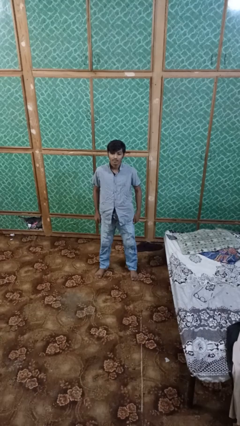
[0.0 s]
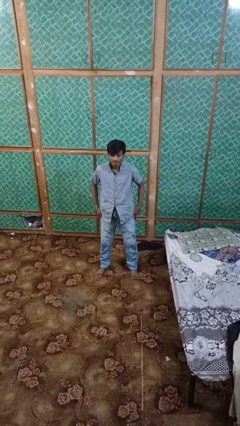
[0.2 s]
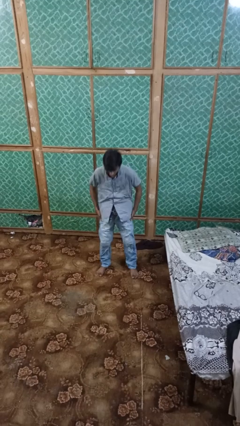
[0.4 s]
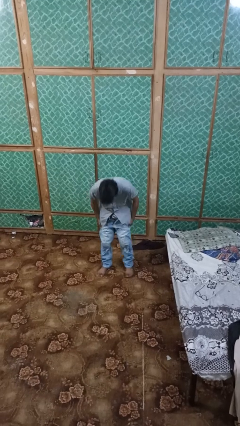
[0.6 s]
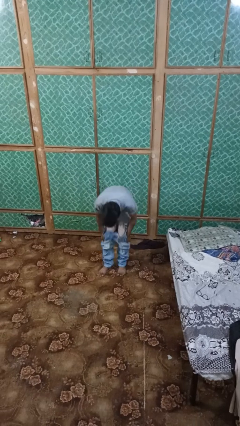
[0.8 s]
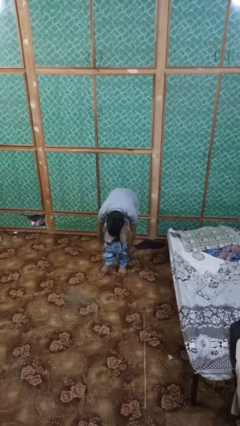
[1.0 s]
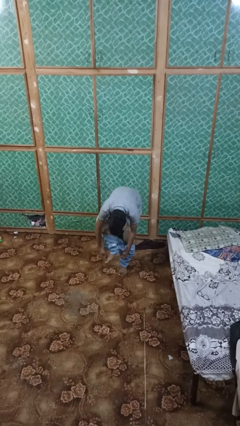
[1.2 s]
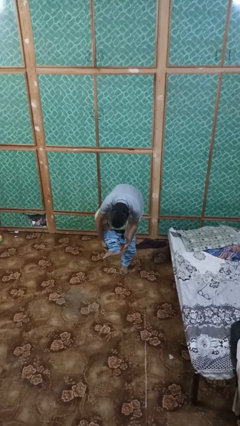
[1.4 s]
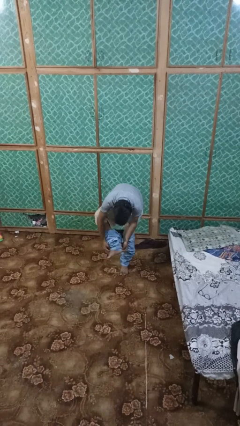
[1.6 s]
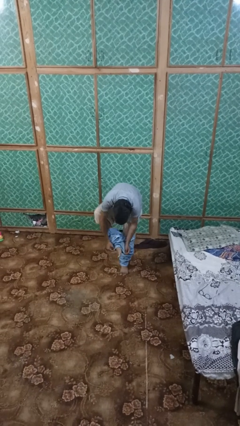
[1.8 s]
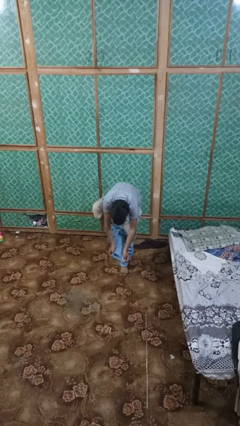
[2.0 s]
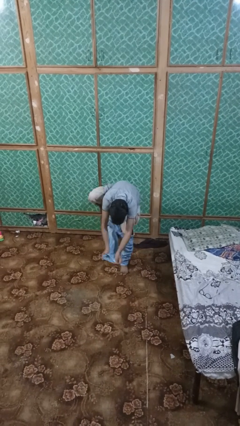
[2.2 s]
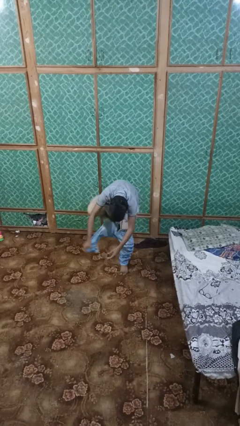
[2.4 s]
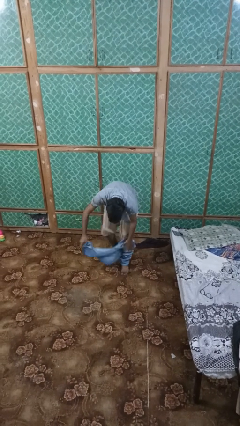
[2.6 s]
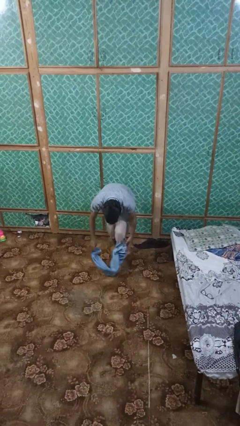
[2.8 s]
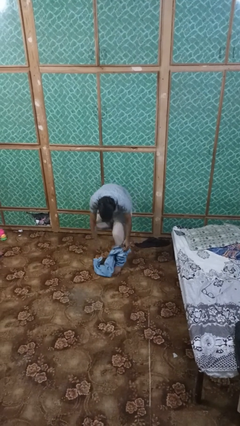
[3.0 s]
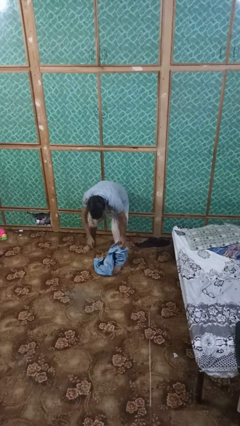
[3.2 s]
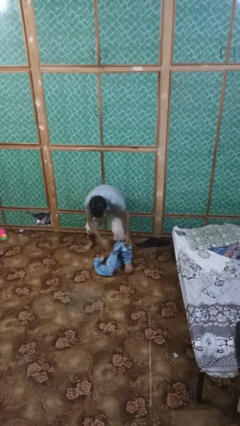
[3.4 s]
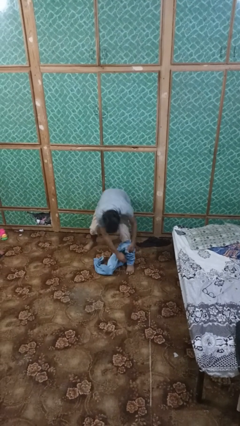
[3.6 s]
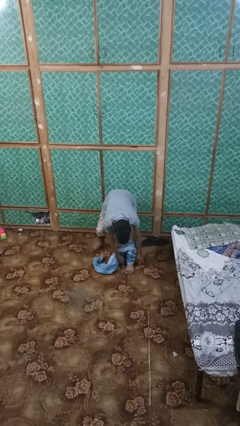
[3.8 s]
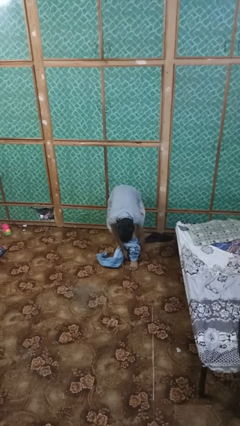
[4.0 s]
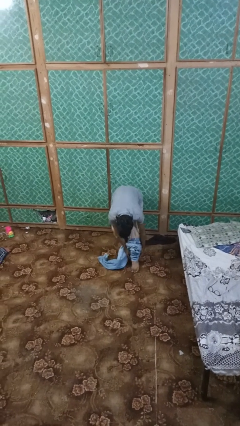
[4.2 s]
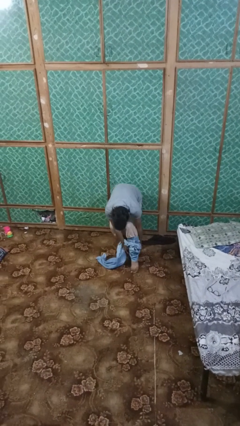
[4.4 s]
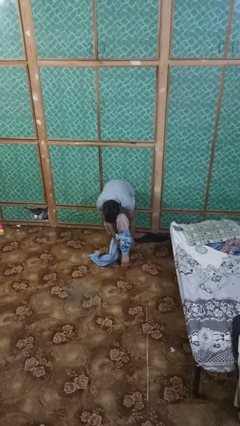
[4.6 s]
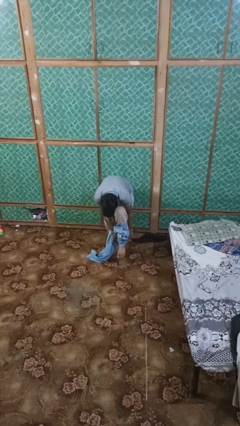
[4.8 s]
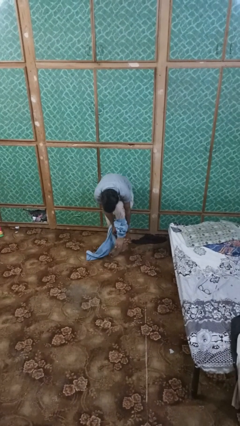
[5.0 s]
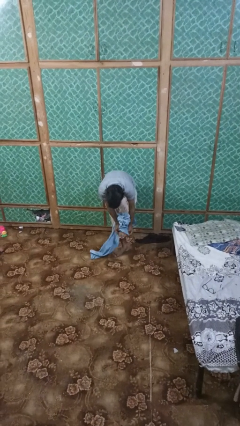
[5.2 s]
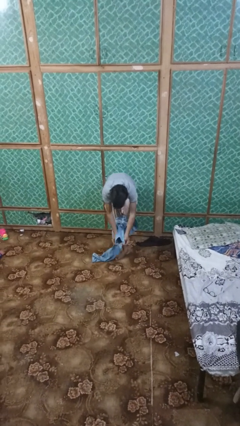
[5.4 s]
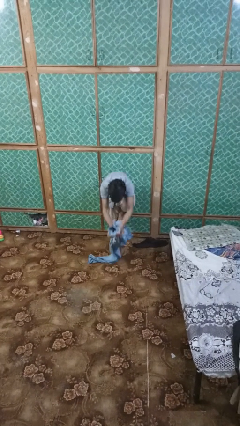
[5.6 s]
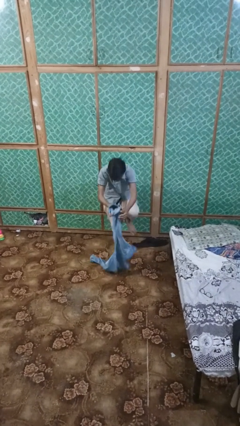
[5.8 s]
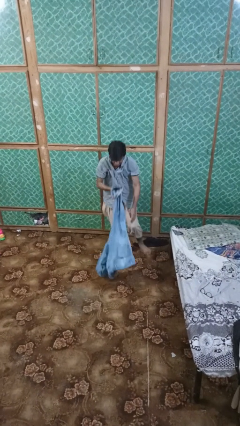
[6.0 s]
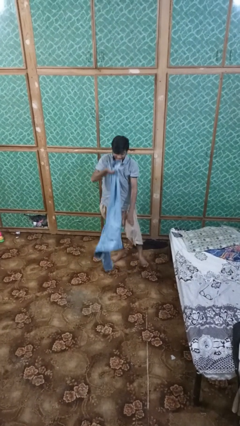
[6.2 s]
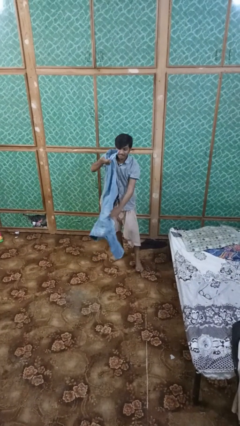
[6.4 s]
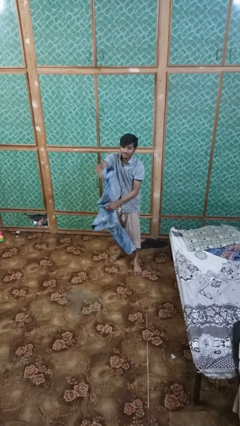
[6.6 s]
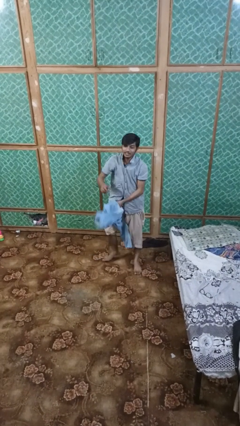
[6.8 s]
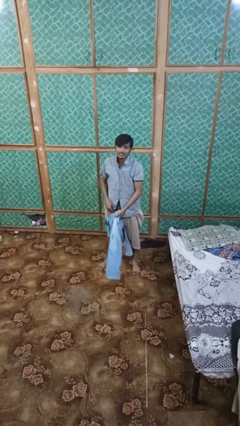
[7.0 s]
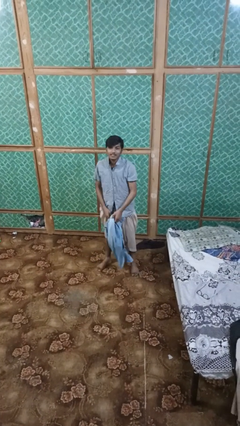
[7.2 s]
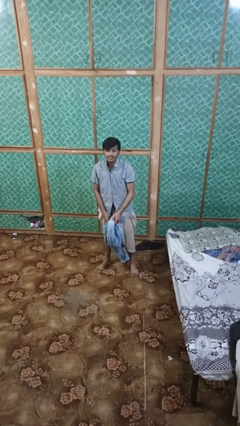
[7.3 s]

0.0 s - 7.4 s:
person takes off pants

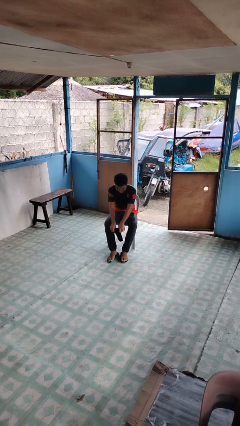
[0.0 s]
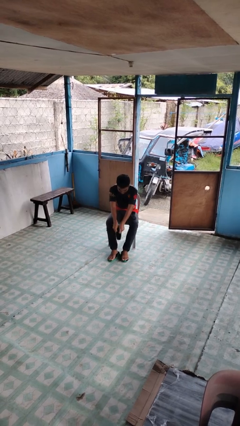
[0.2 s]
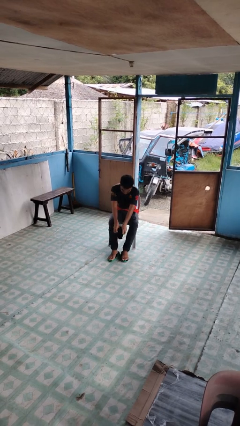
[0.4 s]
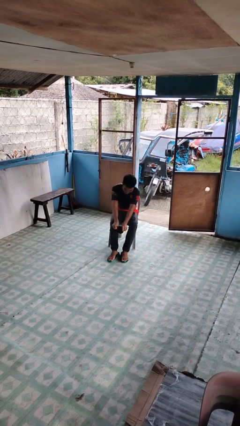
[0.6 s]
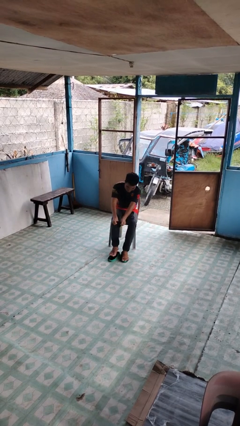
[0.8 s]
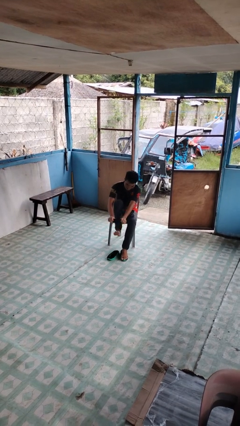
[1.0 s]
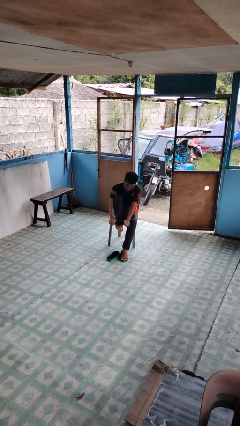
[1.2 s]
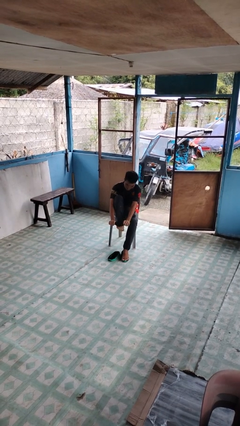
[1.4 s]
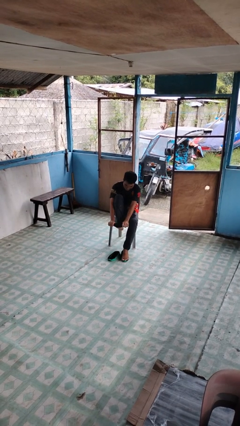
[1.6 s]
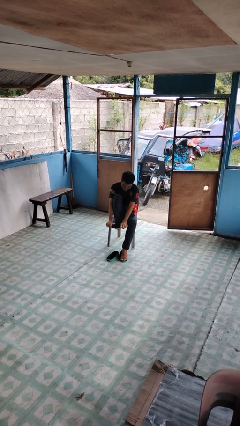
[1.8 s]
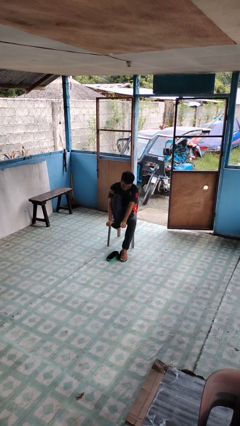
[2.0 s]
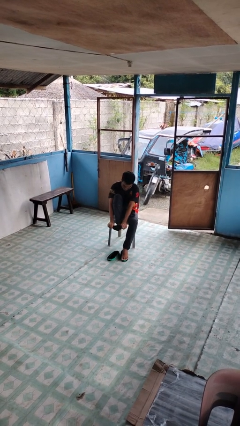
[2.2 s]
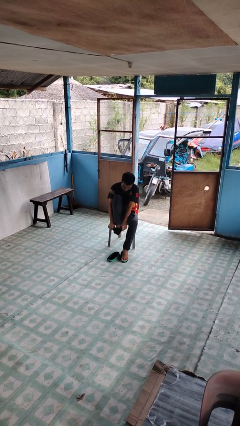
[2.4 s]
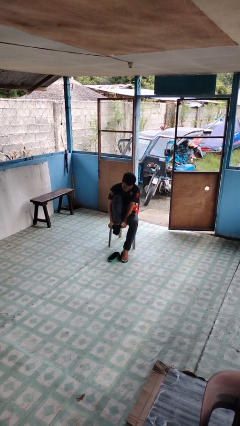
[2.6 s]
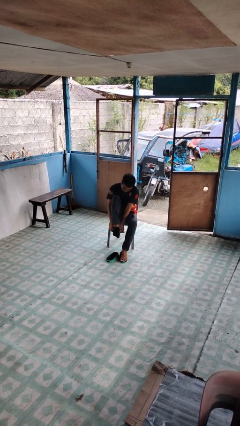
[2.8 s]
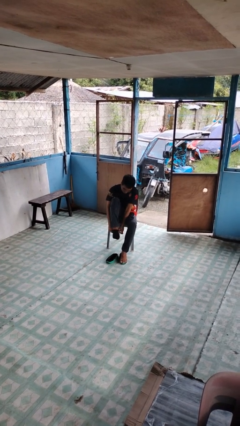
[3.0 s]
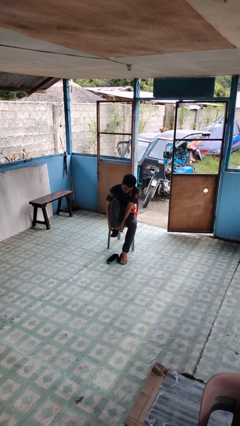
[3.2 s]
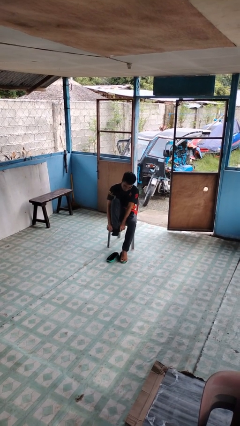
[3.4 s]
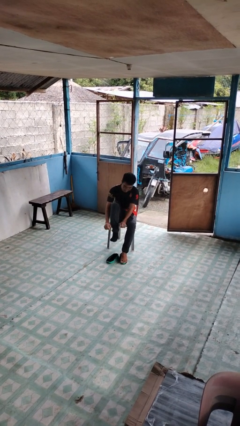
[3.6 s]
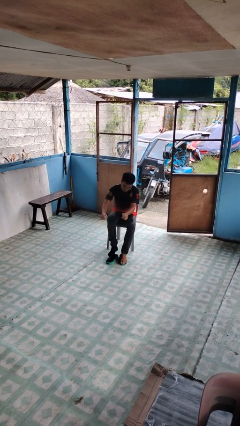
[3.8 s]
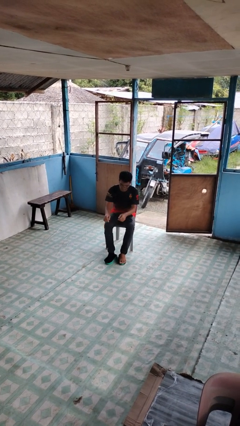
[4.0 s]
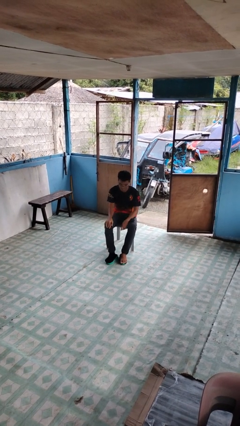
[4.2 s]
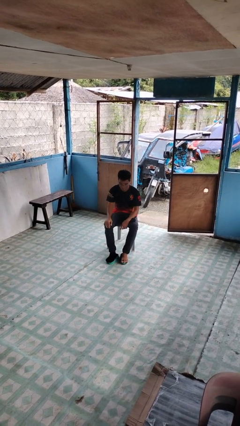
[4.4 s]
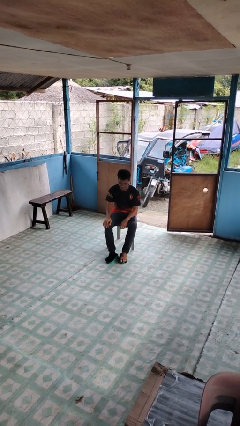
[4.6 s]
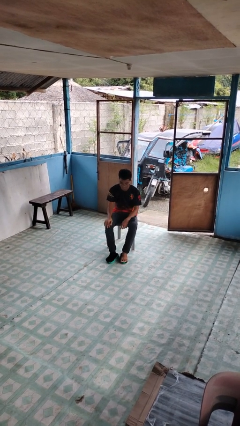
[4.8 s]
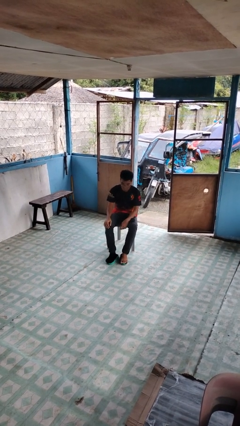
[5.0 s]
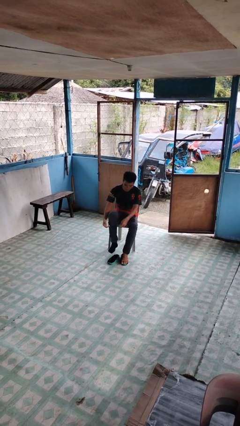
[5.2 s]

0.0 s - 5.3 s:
person puts on socks

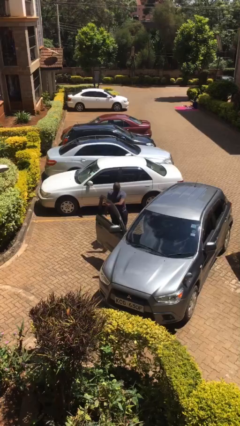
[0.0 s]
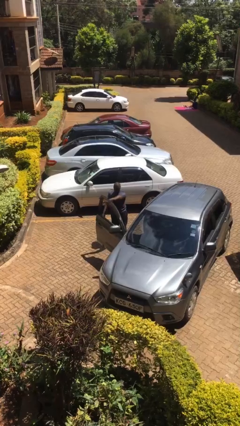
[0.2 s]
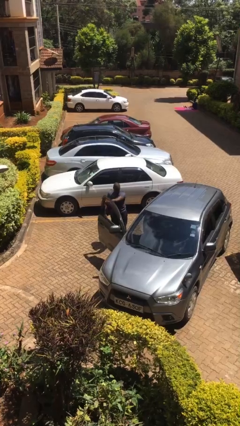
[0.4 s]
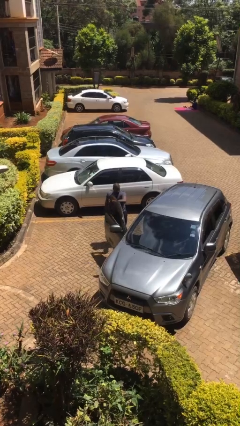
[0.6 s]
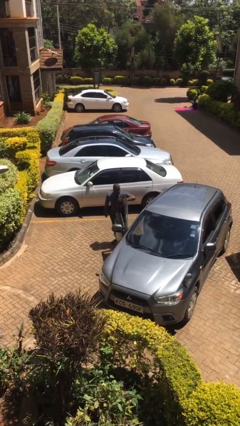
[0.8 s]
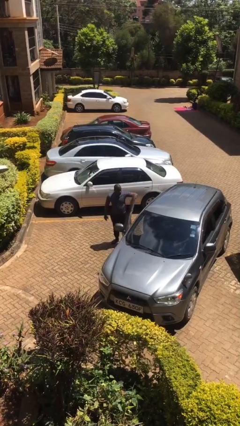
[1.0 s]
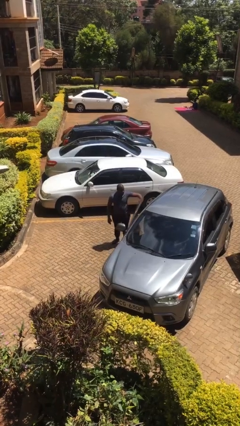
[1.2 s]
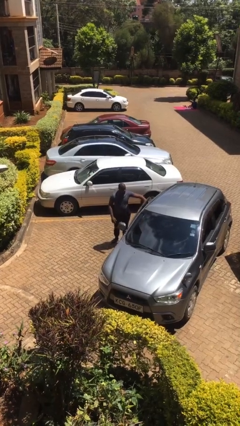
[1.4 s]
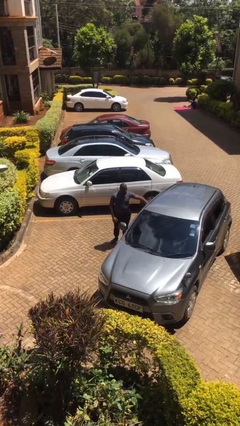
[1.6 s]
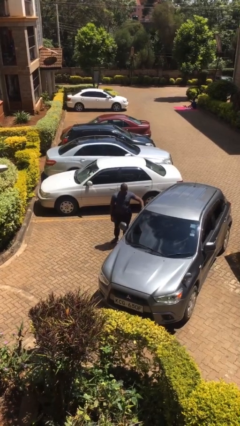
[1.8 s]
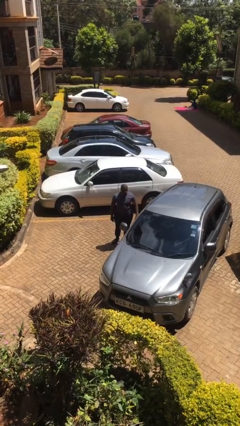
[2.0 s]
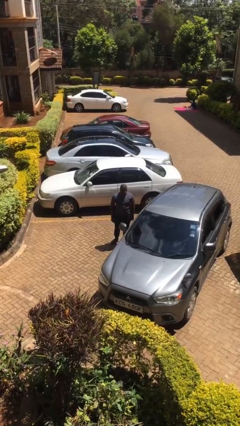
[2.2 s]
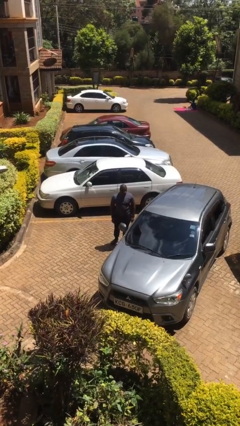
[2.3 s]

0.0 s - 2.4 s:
person closes car door

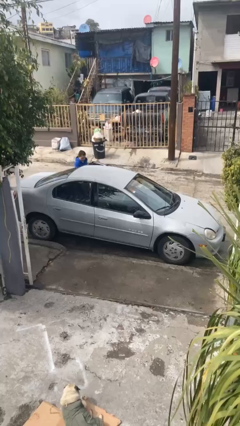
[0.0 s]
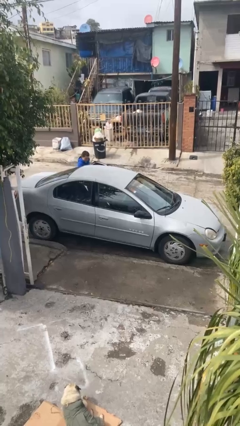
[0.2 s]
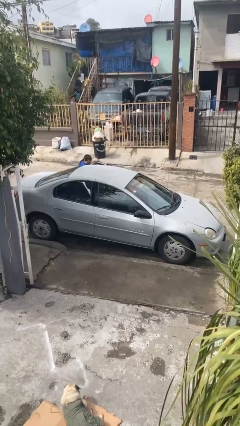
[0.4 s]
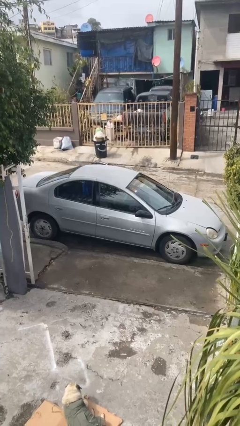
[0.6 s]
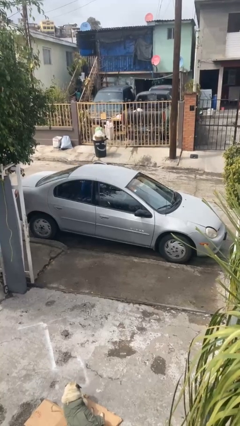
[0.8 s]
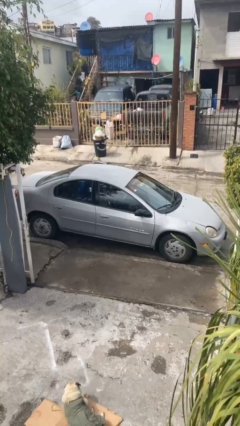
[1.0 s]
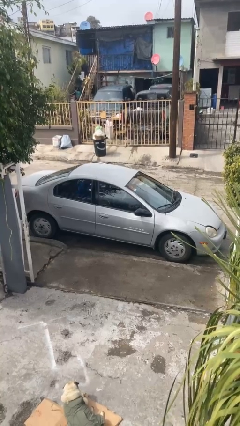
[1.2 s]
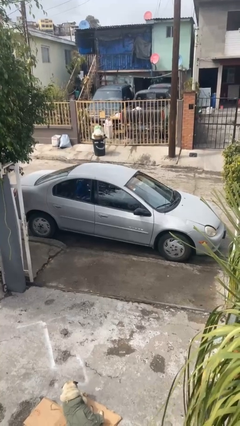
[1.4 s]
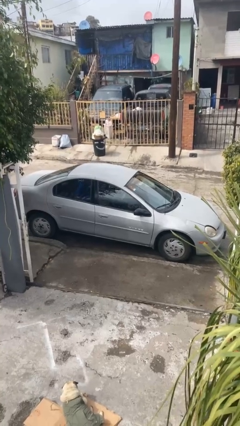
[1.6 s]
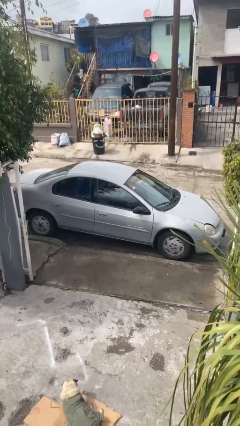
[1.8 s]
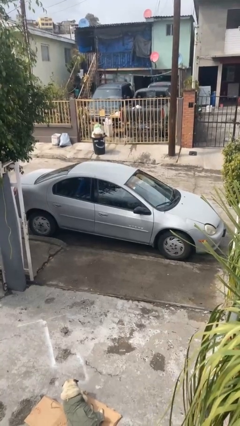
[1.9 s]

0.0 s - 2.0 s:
car picks up person

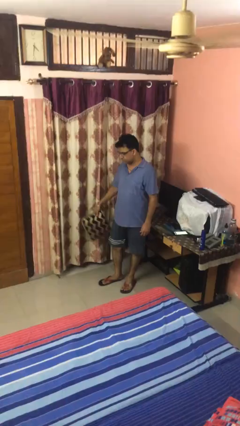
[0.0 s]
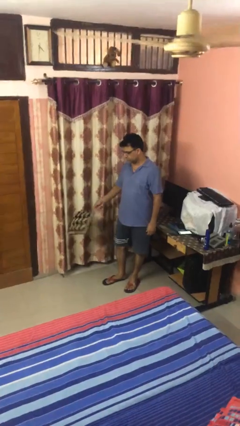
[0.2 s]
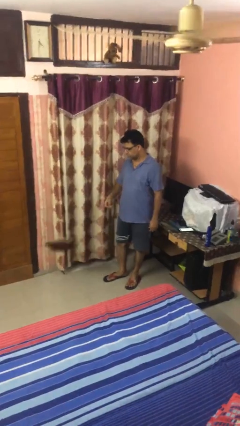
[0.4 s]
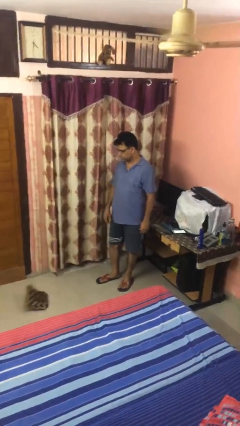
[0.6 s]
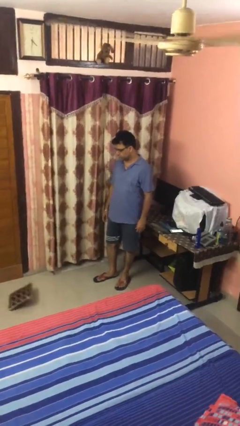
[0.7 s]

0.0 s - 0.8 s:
person throws object to ground
